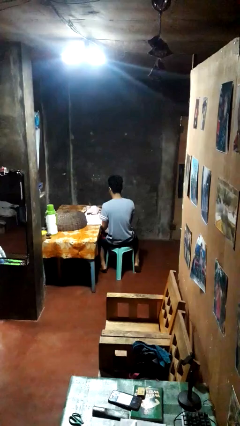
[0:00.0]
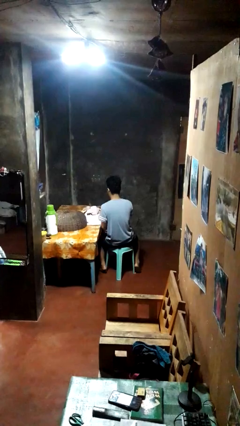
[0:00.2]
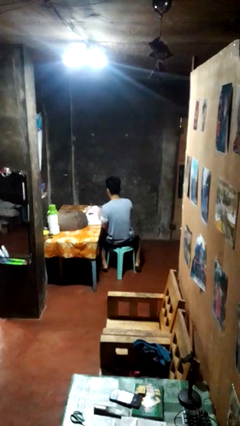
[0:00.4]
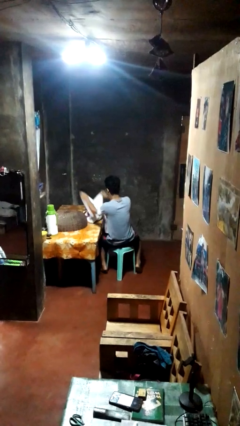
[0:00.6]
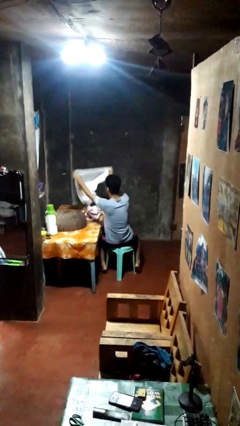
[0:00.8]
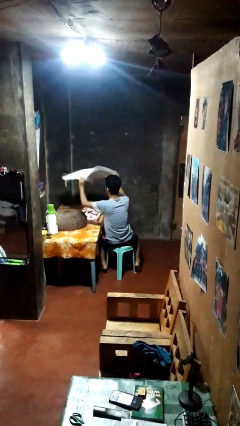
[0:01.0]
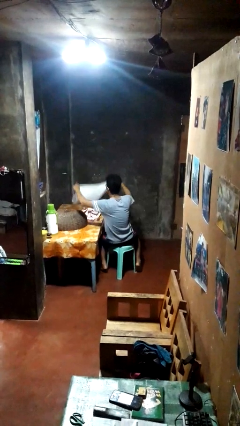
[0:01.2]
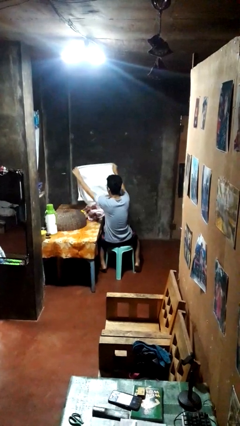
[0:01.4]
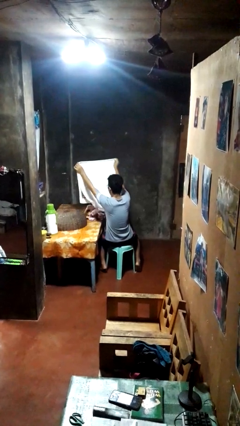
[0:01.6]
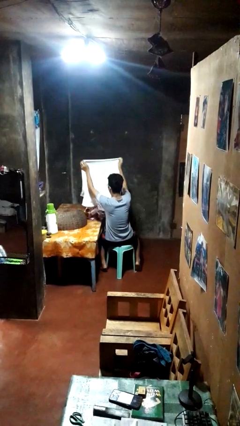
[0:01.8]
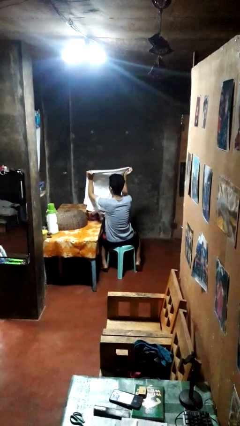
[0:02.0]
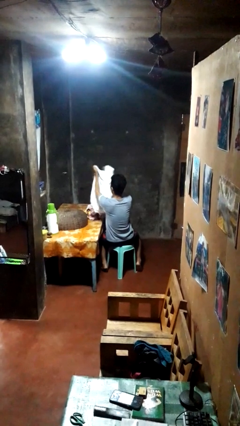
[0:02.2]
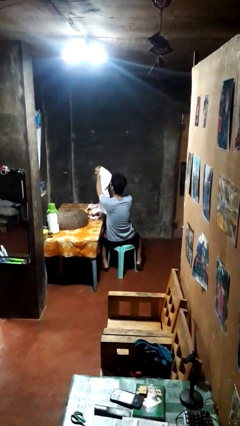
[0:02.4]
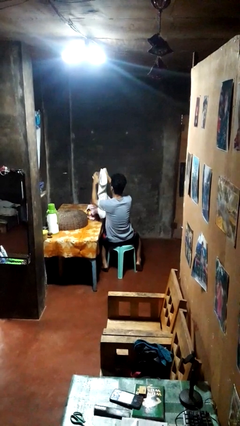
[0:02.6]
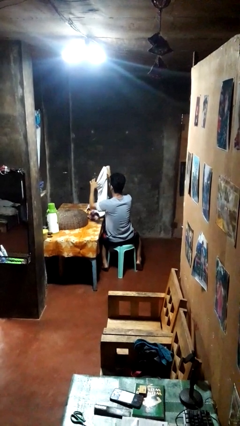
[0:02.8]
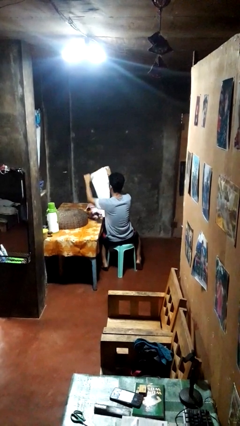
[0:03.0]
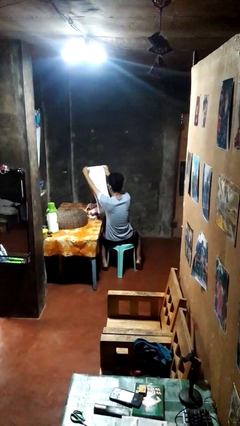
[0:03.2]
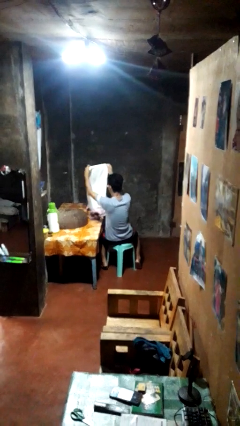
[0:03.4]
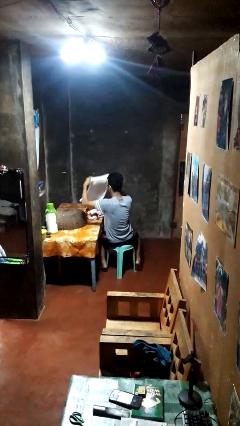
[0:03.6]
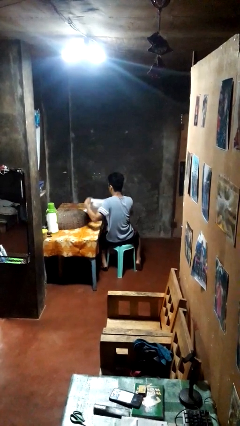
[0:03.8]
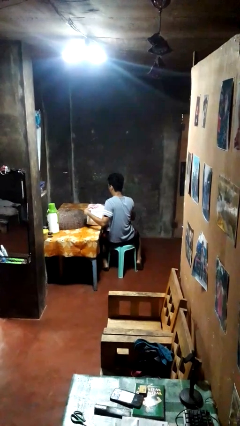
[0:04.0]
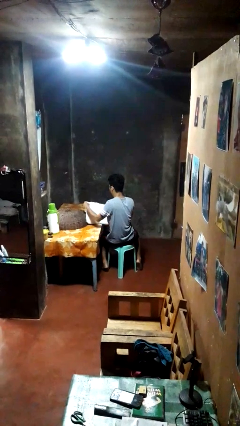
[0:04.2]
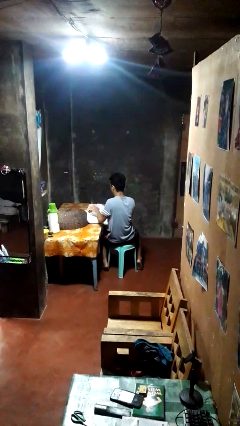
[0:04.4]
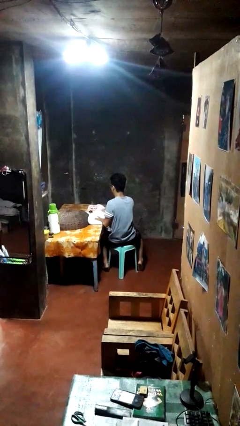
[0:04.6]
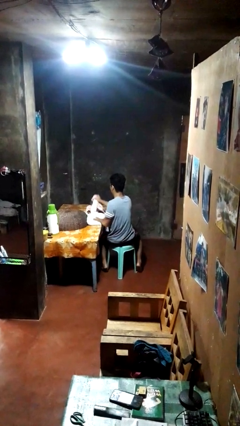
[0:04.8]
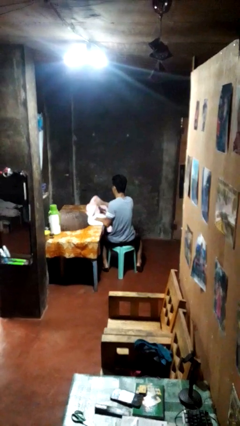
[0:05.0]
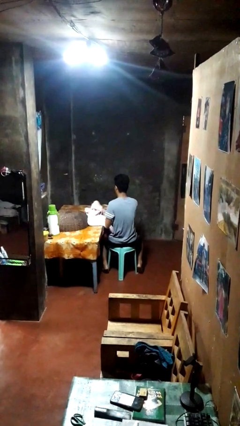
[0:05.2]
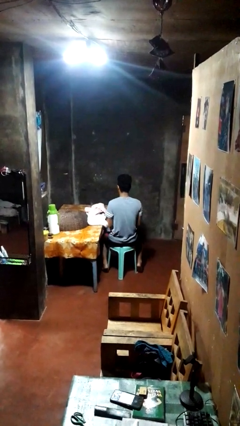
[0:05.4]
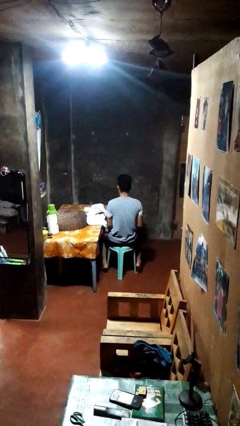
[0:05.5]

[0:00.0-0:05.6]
person folds towel

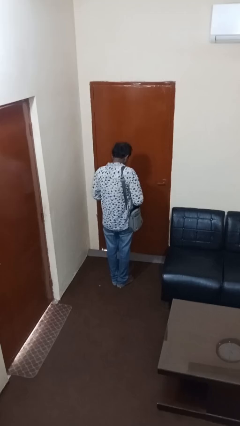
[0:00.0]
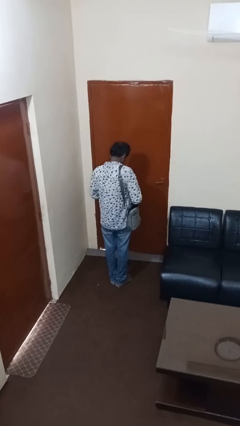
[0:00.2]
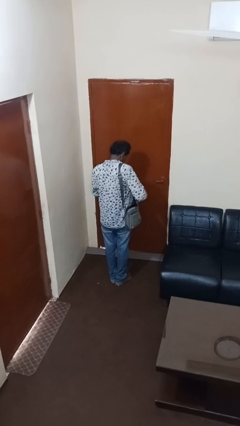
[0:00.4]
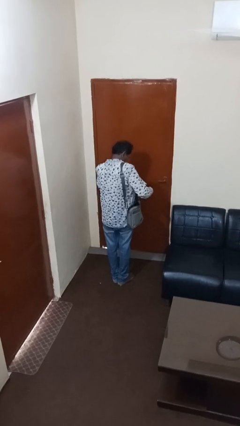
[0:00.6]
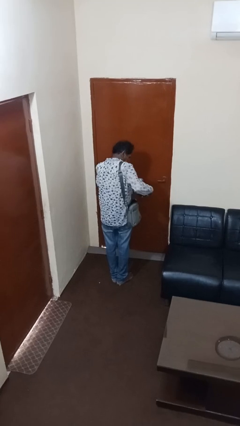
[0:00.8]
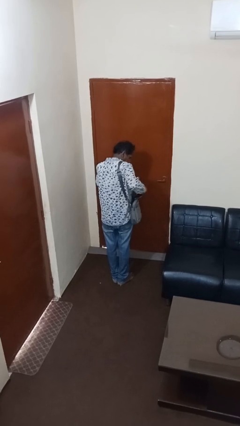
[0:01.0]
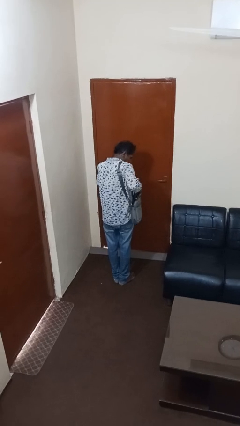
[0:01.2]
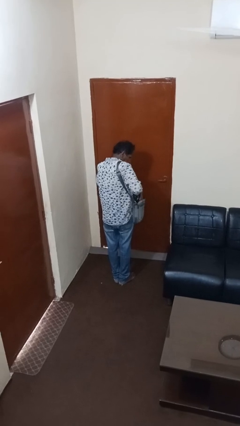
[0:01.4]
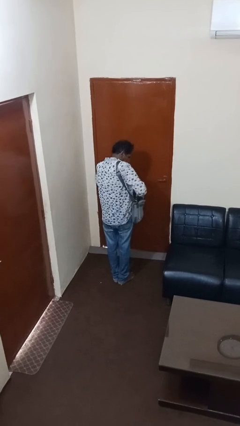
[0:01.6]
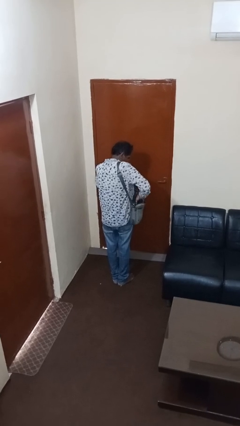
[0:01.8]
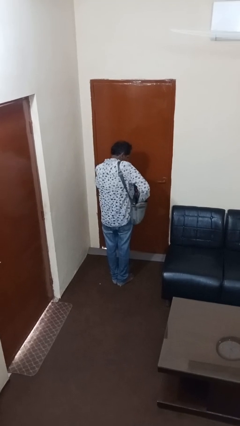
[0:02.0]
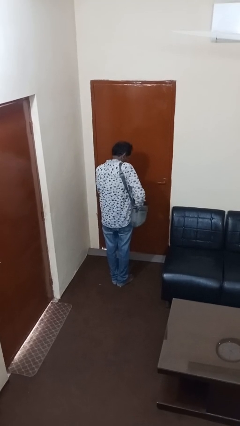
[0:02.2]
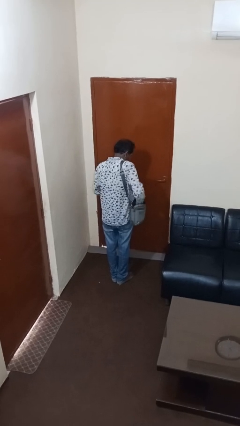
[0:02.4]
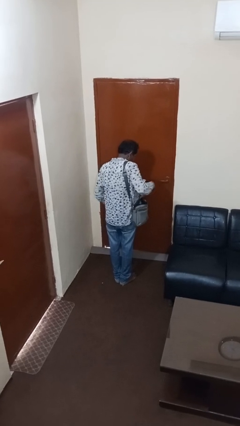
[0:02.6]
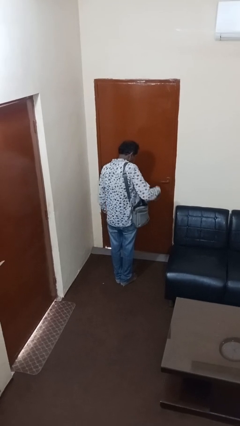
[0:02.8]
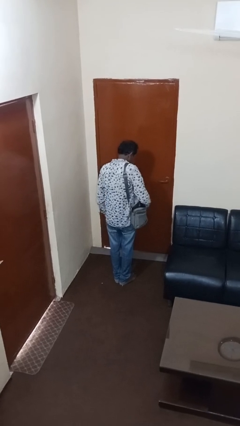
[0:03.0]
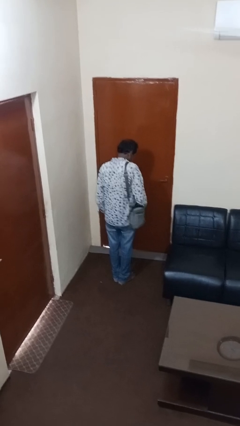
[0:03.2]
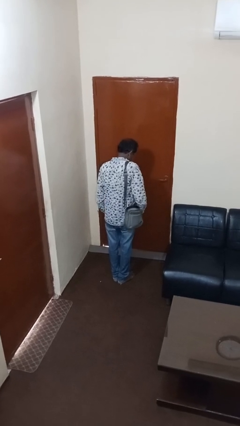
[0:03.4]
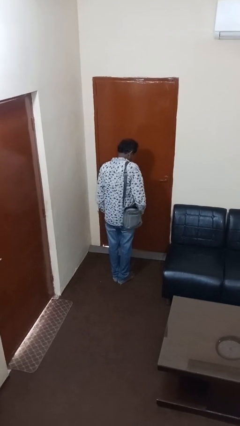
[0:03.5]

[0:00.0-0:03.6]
person puts object into purse

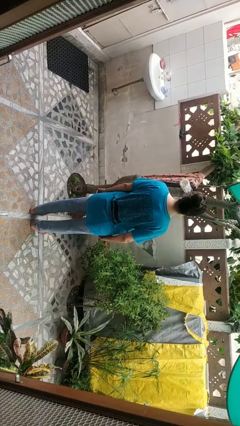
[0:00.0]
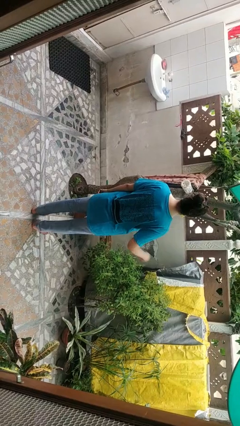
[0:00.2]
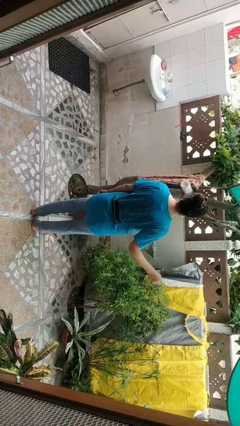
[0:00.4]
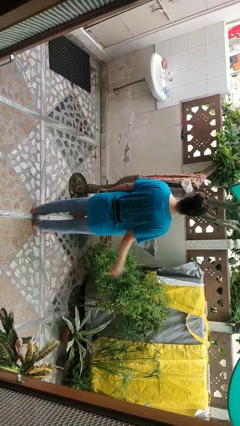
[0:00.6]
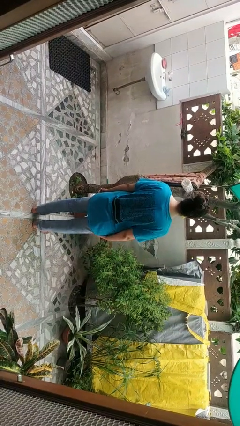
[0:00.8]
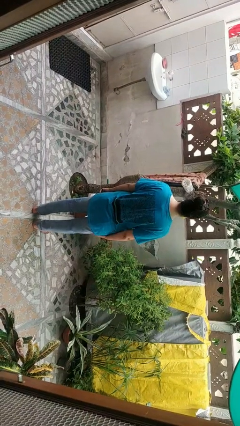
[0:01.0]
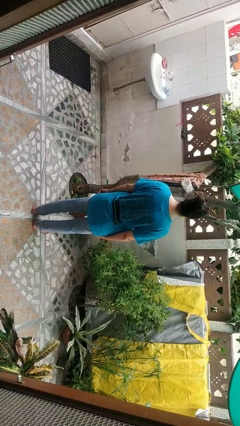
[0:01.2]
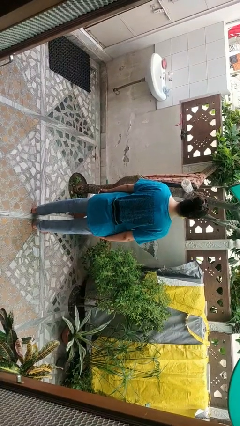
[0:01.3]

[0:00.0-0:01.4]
person slaps hands on thighs

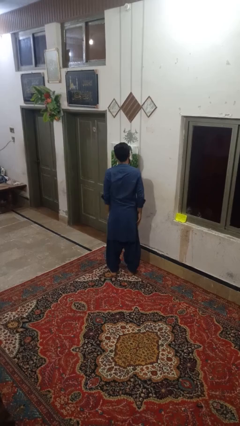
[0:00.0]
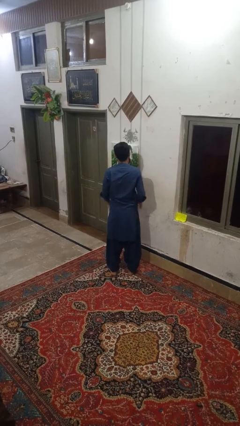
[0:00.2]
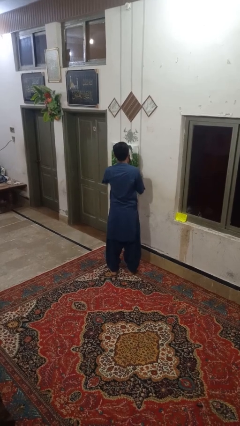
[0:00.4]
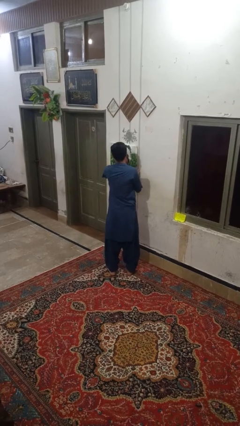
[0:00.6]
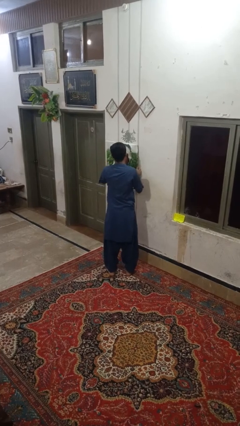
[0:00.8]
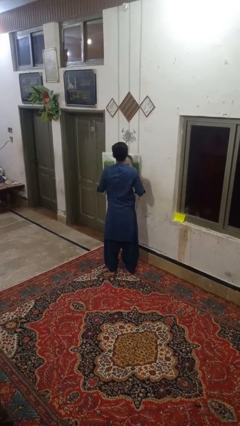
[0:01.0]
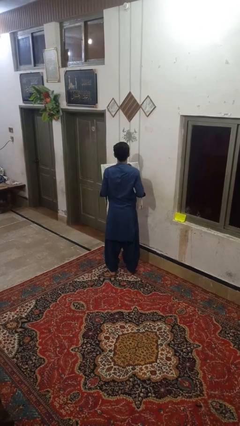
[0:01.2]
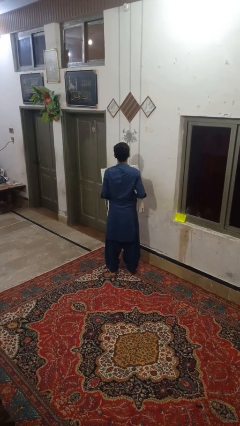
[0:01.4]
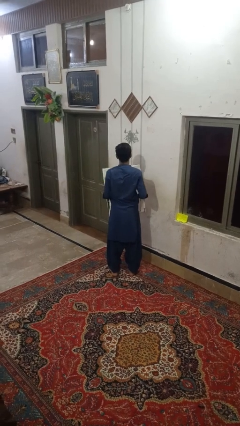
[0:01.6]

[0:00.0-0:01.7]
person takes down picture frame

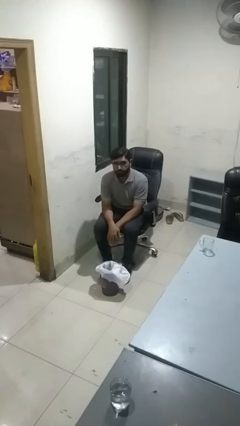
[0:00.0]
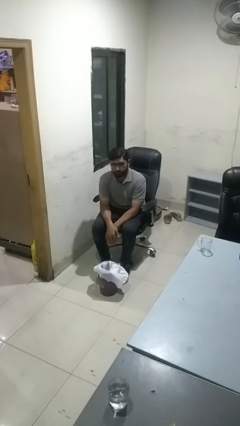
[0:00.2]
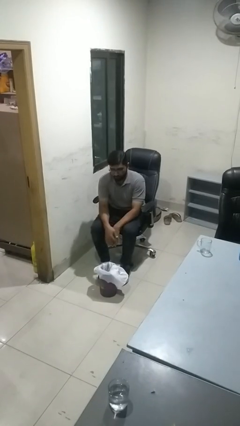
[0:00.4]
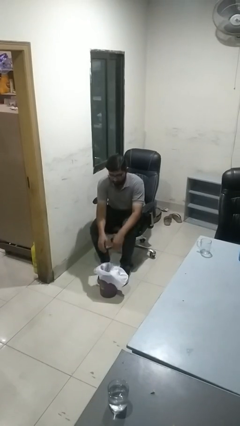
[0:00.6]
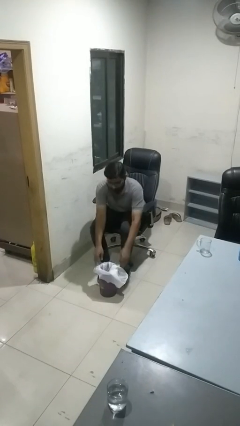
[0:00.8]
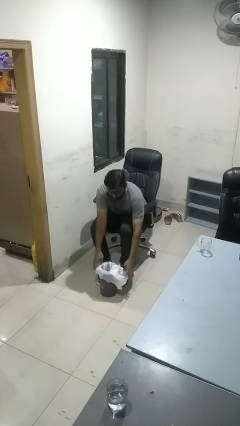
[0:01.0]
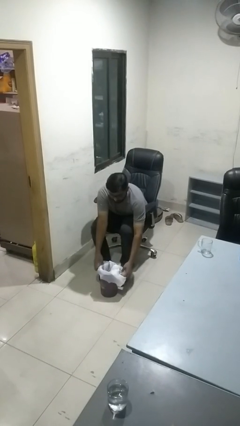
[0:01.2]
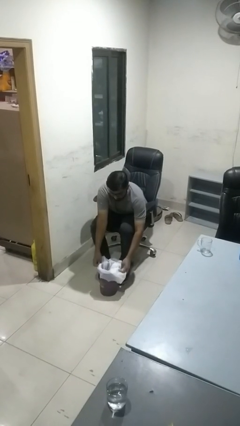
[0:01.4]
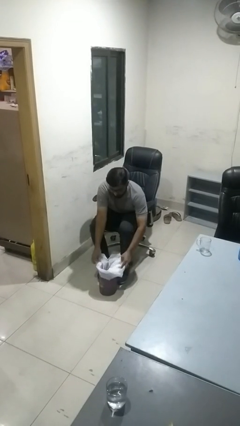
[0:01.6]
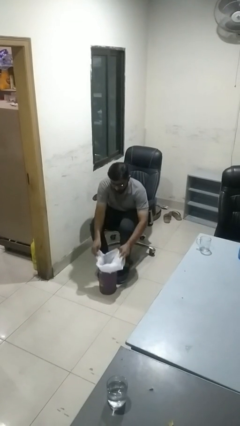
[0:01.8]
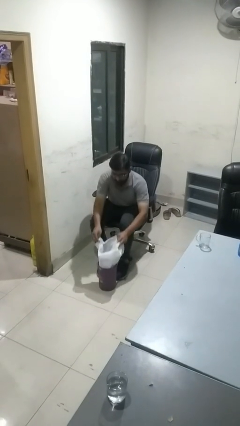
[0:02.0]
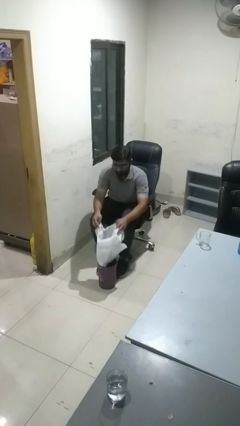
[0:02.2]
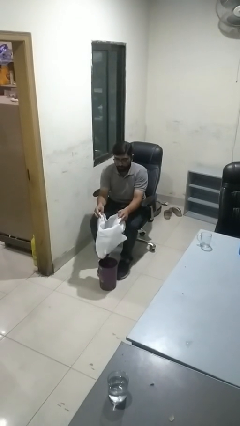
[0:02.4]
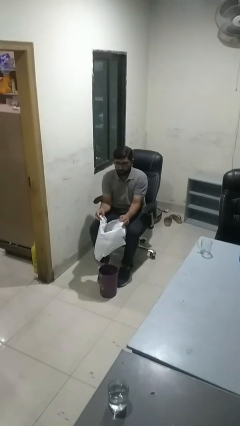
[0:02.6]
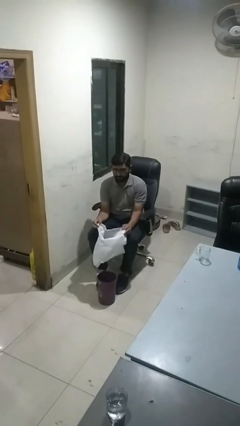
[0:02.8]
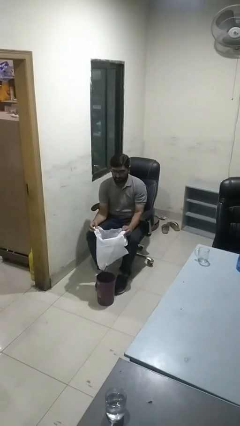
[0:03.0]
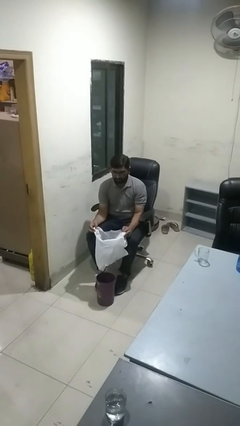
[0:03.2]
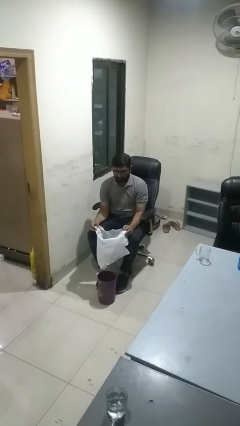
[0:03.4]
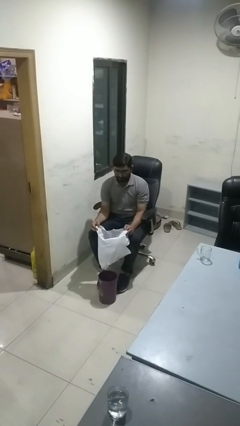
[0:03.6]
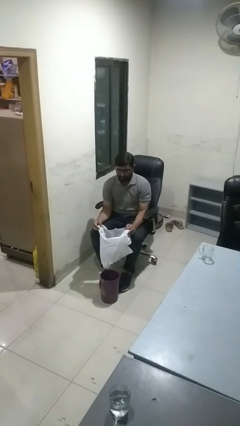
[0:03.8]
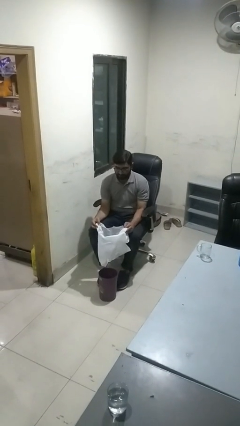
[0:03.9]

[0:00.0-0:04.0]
person removes trashbag from trashcan

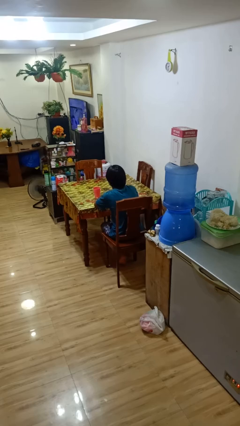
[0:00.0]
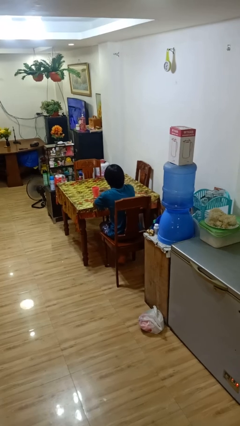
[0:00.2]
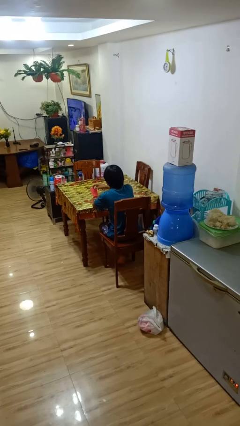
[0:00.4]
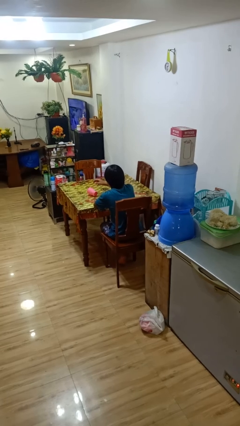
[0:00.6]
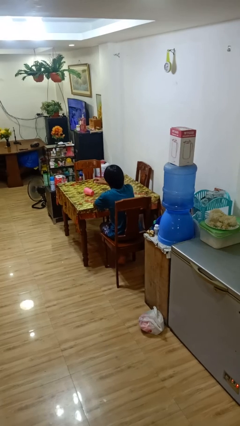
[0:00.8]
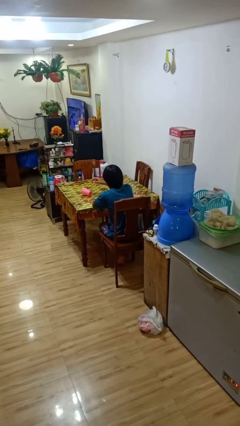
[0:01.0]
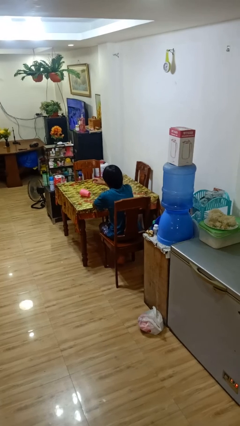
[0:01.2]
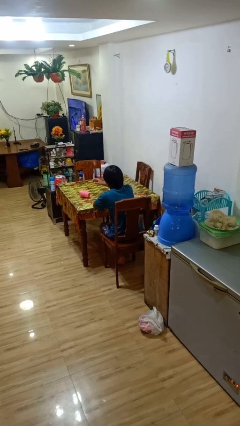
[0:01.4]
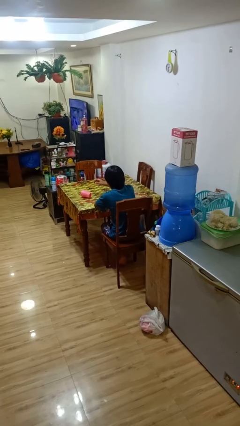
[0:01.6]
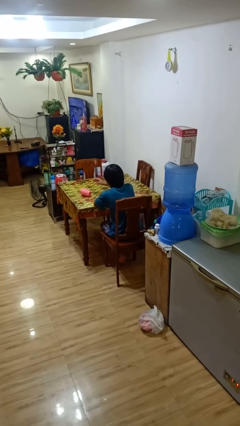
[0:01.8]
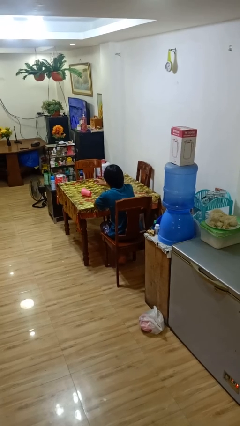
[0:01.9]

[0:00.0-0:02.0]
person knocks over glass
